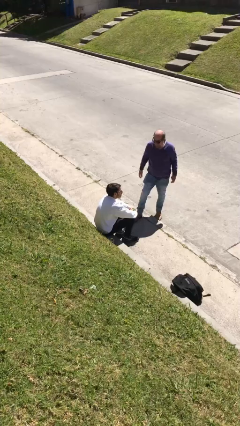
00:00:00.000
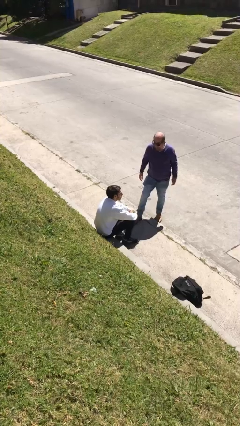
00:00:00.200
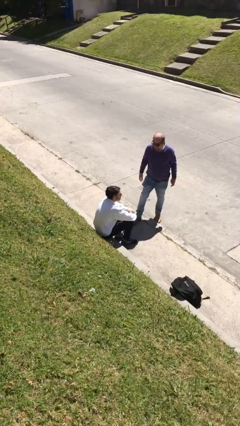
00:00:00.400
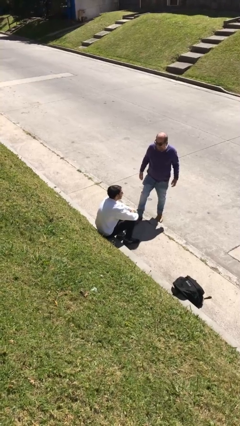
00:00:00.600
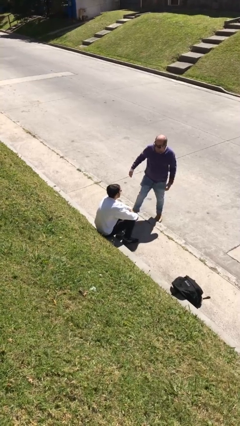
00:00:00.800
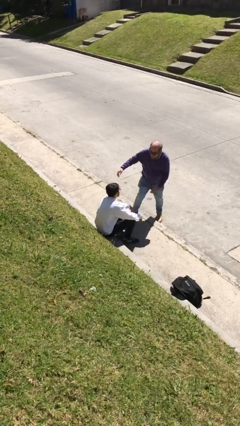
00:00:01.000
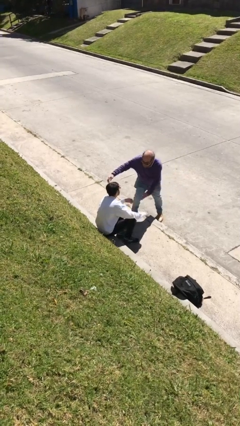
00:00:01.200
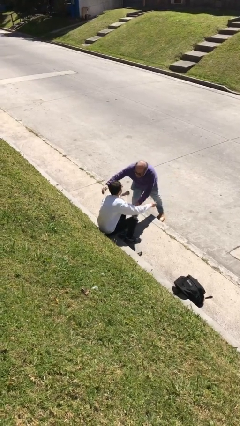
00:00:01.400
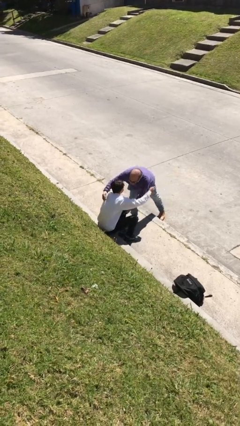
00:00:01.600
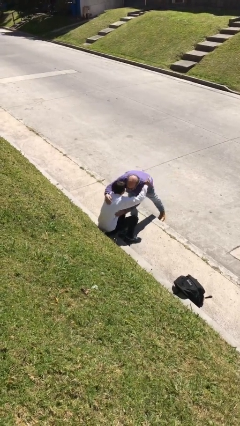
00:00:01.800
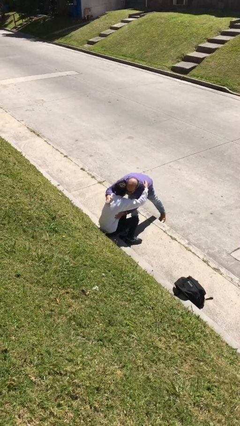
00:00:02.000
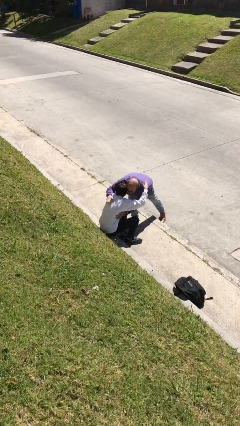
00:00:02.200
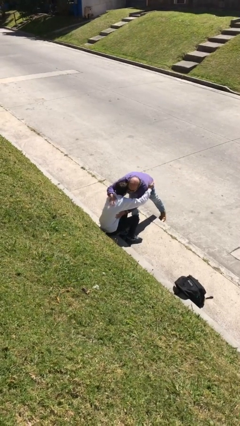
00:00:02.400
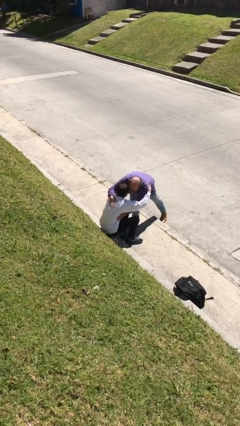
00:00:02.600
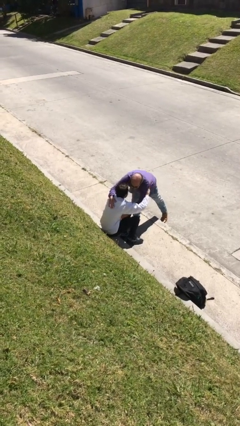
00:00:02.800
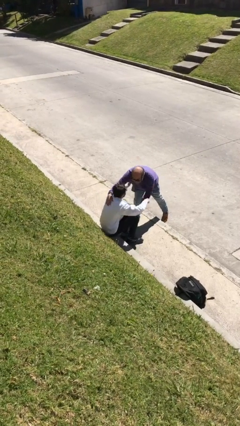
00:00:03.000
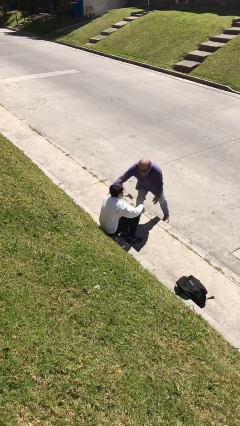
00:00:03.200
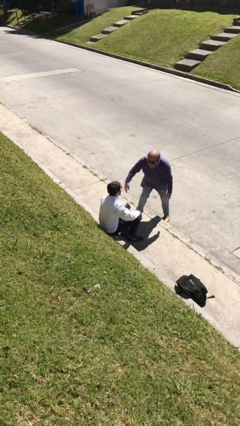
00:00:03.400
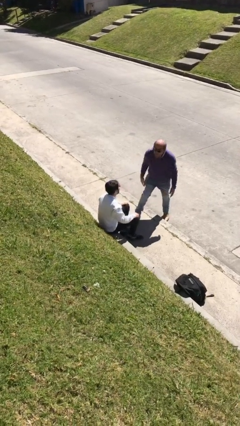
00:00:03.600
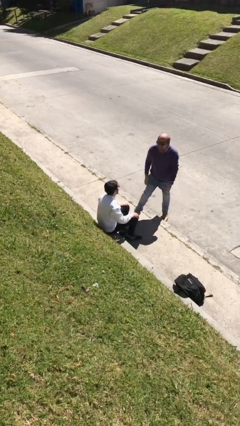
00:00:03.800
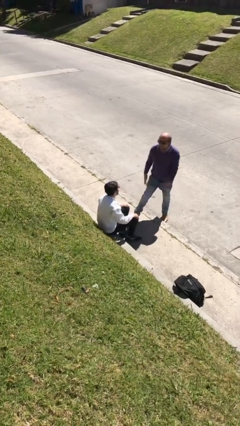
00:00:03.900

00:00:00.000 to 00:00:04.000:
person embraces person

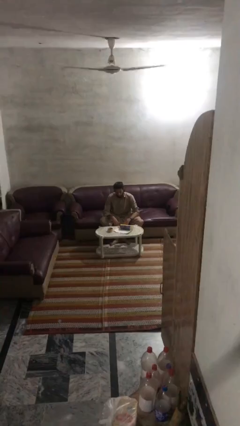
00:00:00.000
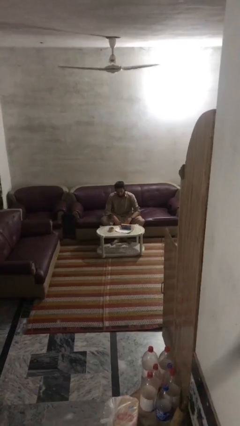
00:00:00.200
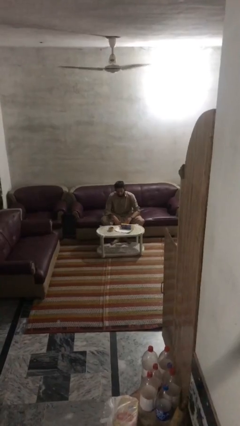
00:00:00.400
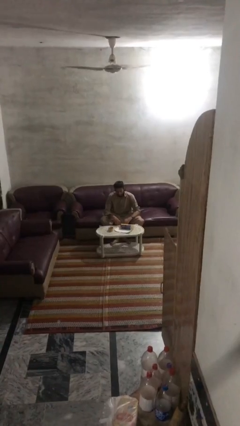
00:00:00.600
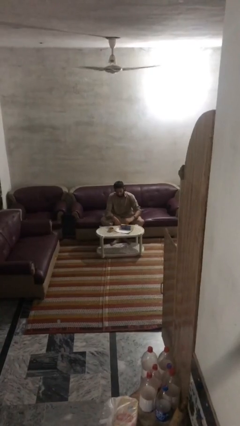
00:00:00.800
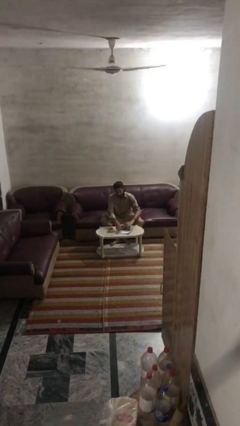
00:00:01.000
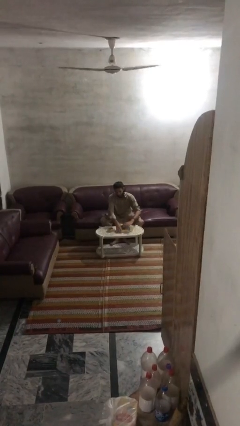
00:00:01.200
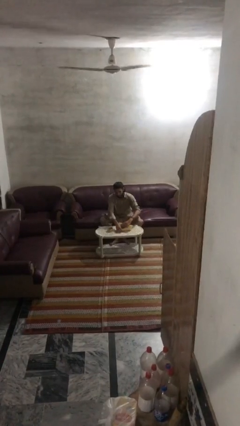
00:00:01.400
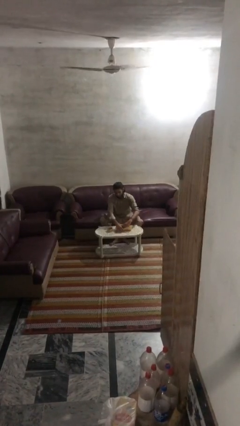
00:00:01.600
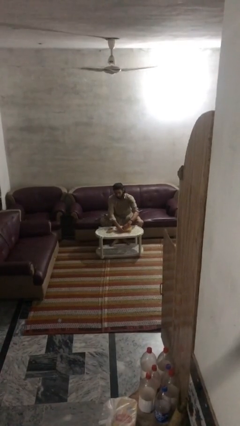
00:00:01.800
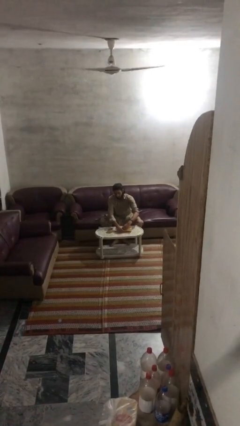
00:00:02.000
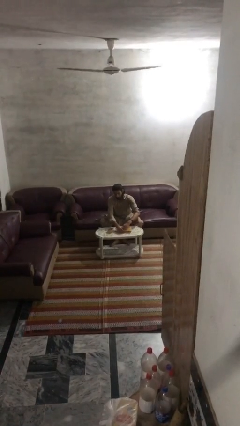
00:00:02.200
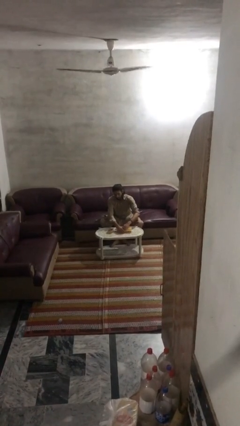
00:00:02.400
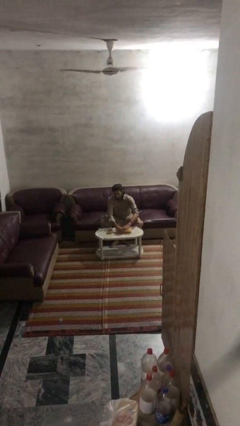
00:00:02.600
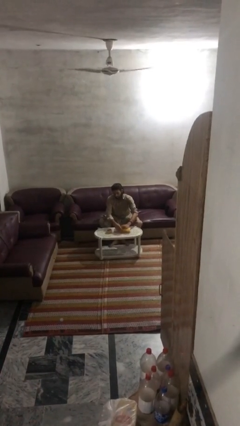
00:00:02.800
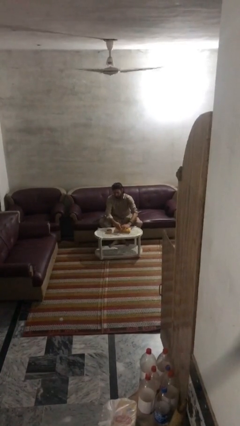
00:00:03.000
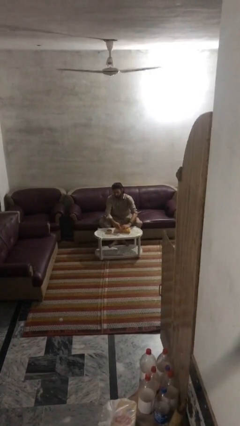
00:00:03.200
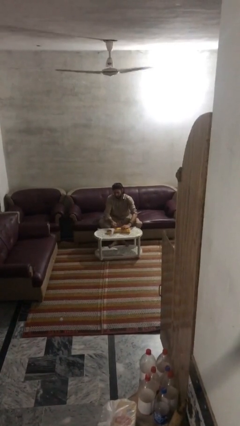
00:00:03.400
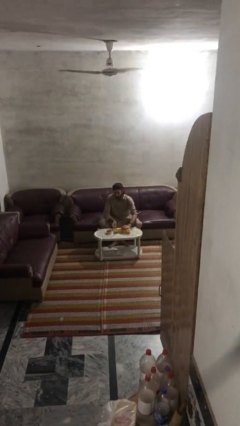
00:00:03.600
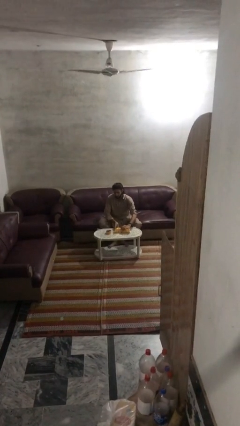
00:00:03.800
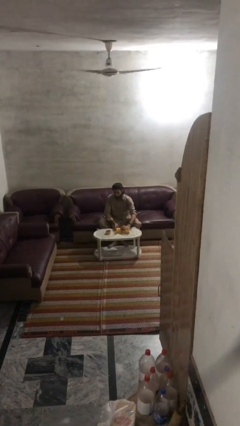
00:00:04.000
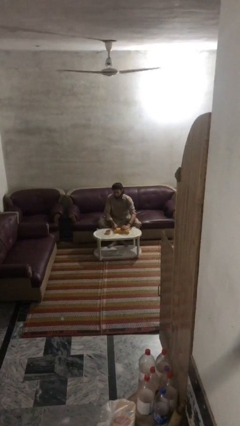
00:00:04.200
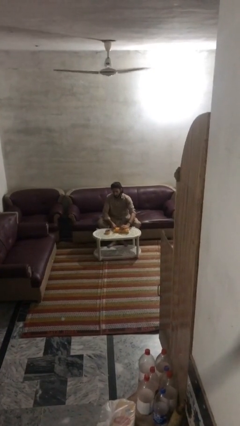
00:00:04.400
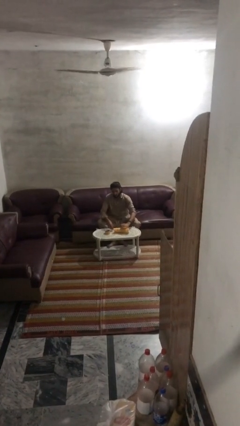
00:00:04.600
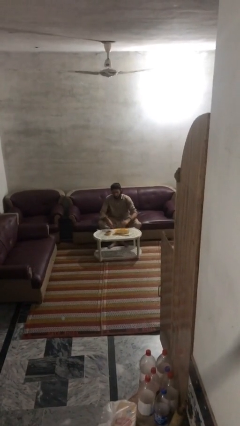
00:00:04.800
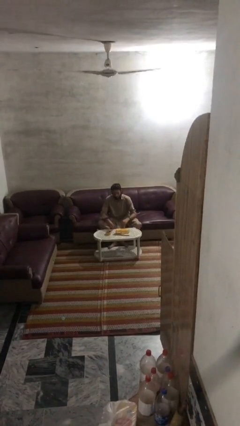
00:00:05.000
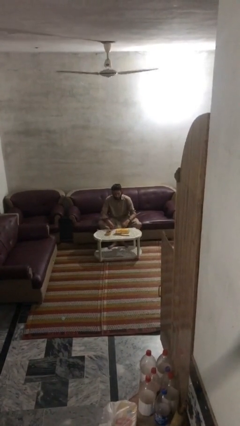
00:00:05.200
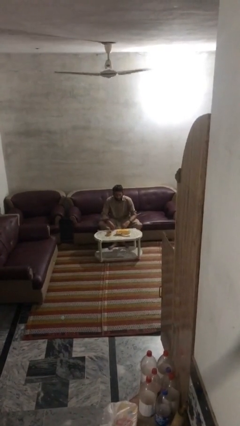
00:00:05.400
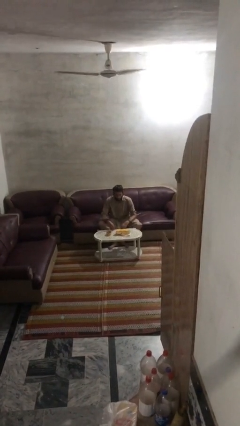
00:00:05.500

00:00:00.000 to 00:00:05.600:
person wraps box

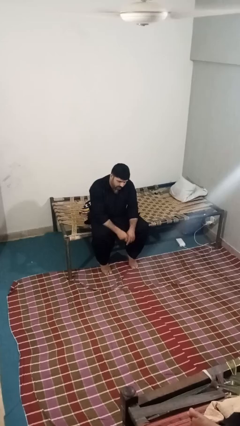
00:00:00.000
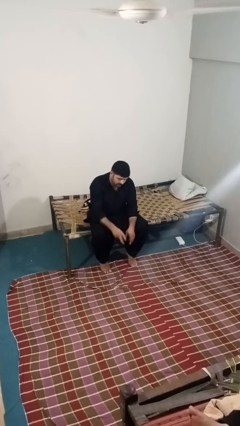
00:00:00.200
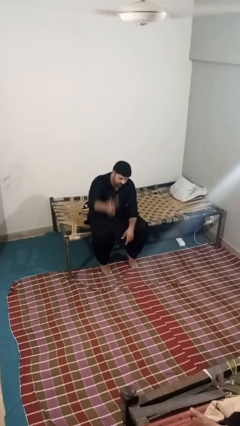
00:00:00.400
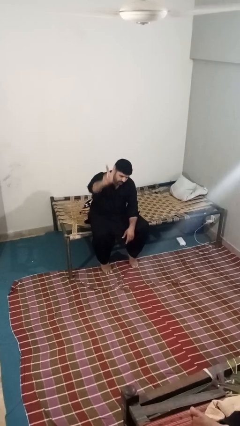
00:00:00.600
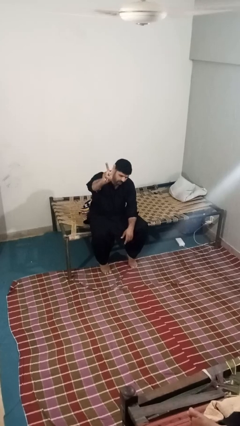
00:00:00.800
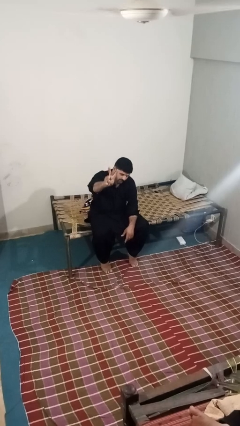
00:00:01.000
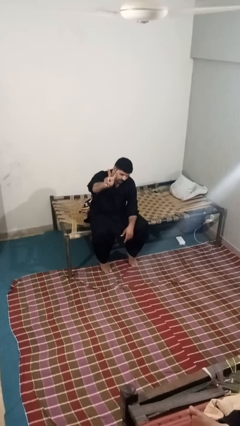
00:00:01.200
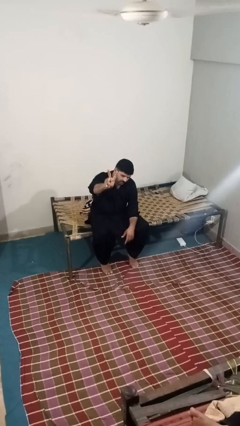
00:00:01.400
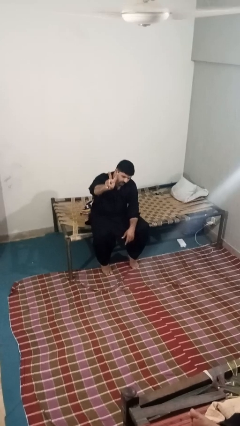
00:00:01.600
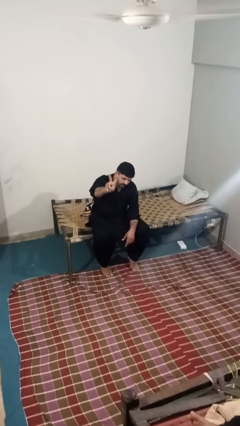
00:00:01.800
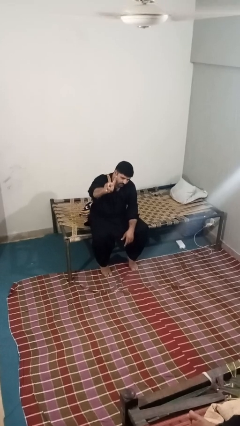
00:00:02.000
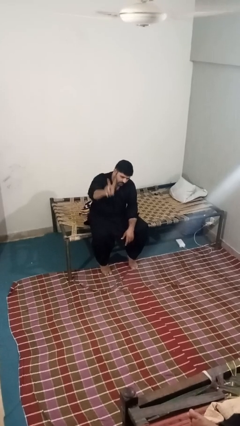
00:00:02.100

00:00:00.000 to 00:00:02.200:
person gestures peace

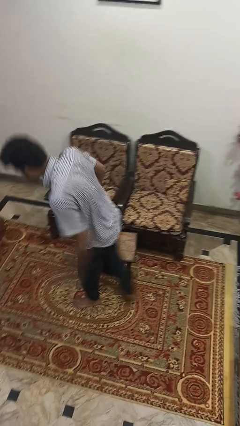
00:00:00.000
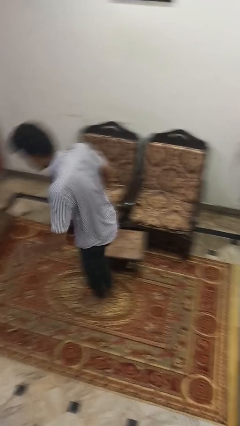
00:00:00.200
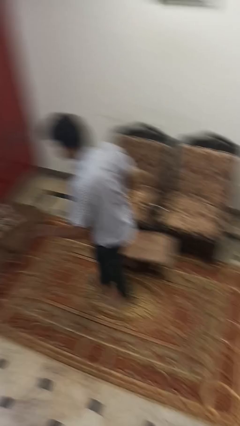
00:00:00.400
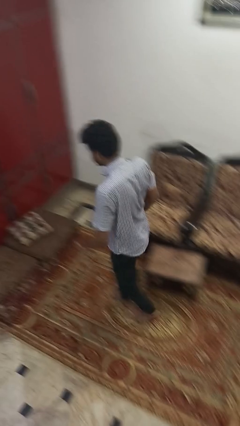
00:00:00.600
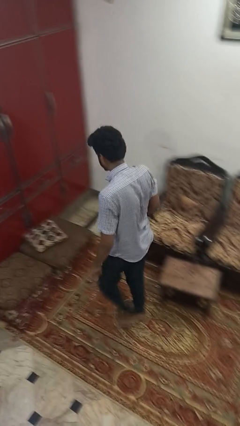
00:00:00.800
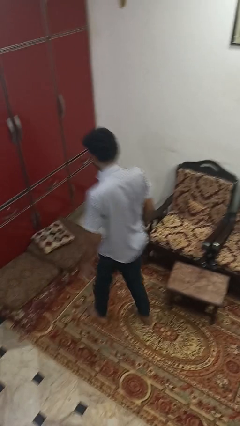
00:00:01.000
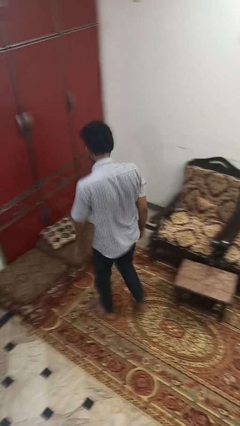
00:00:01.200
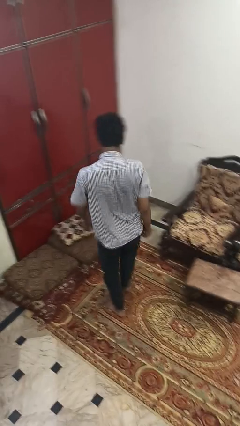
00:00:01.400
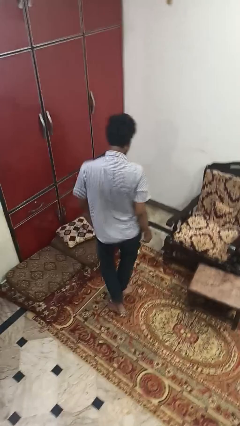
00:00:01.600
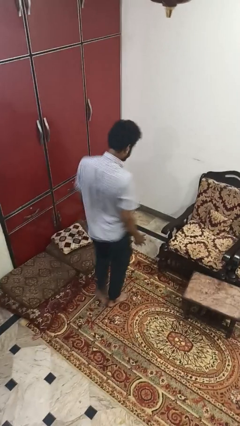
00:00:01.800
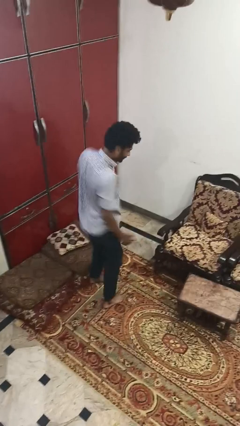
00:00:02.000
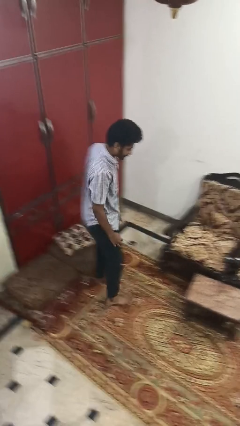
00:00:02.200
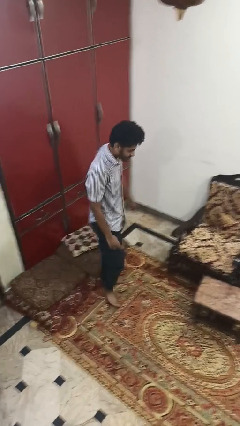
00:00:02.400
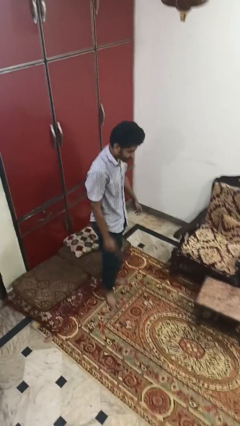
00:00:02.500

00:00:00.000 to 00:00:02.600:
person bumps into table

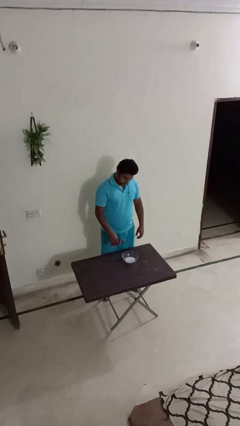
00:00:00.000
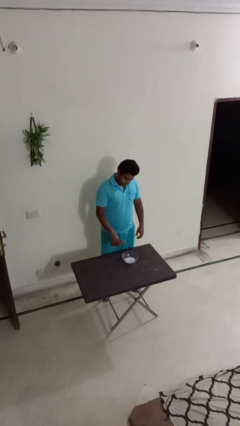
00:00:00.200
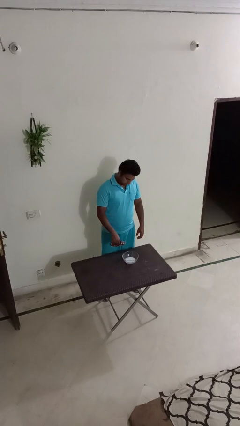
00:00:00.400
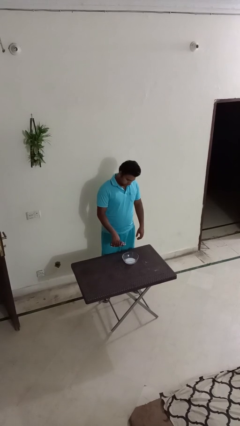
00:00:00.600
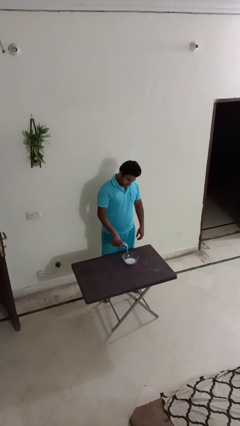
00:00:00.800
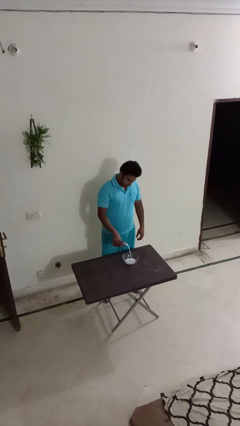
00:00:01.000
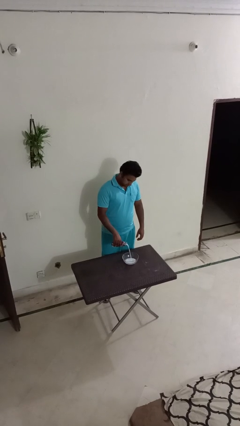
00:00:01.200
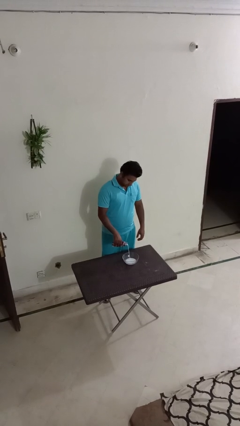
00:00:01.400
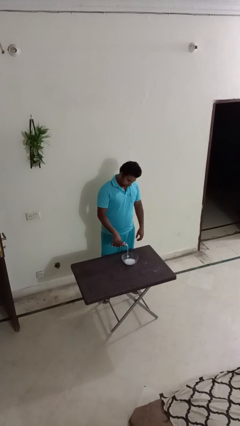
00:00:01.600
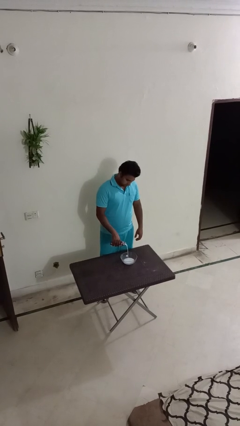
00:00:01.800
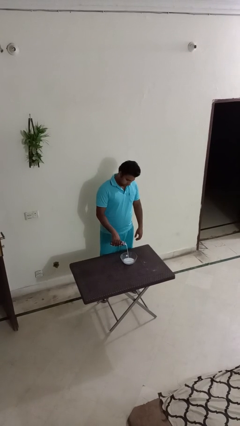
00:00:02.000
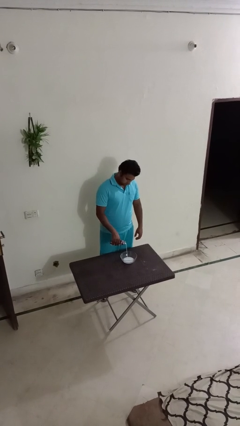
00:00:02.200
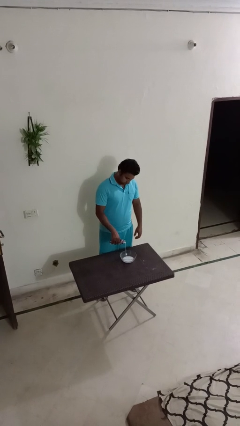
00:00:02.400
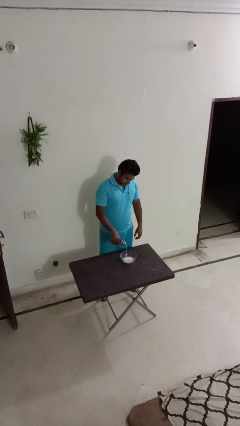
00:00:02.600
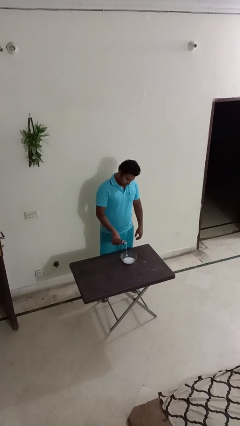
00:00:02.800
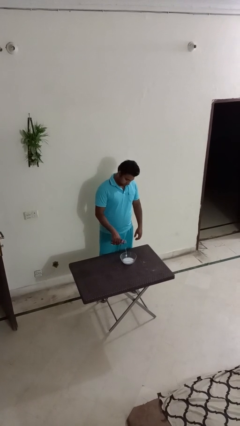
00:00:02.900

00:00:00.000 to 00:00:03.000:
person pours into bowl
